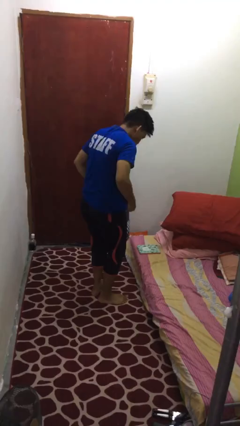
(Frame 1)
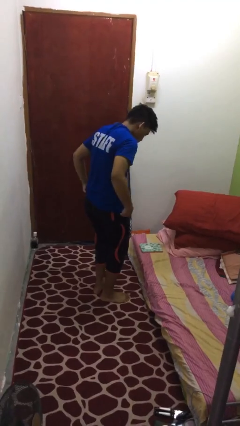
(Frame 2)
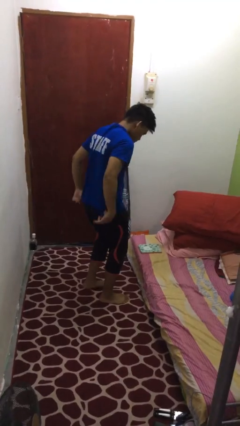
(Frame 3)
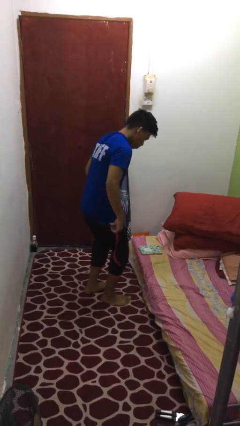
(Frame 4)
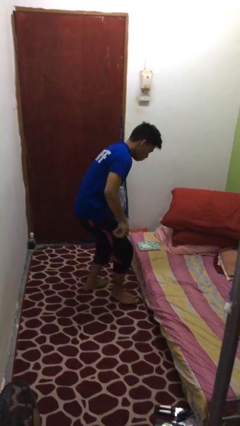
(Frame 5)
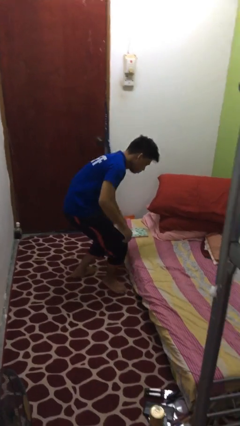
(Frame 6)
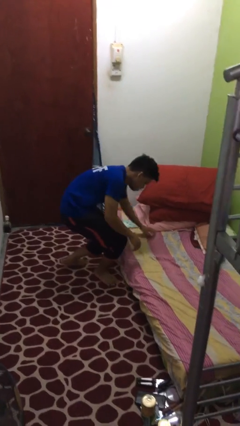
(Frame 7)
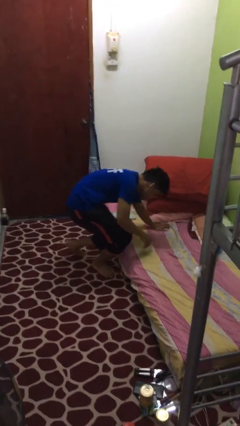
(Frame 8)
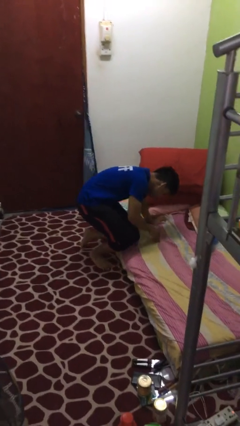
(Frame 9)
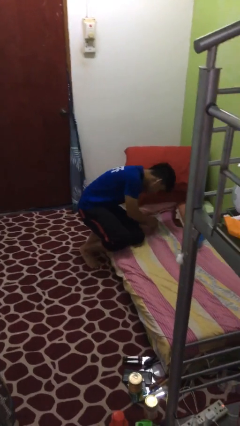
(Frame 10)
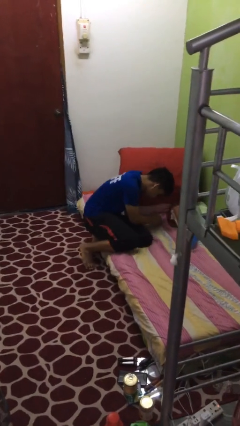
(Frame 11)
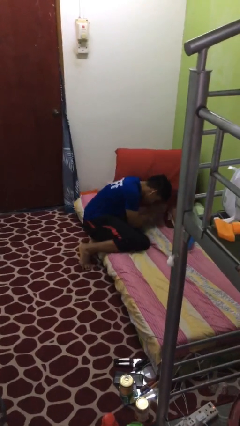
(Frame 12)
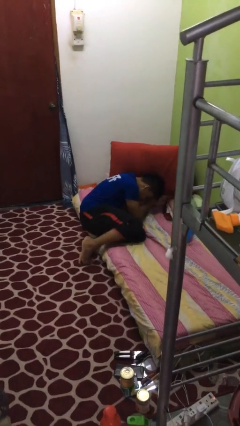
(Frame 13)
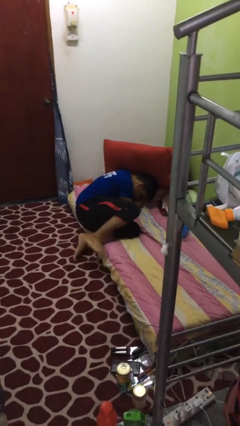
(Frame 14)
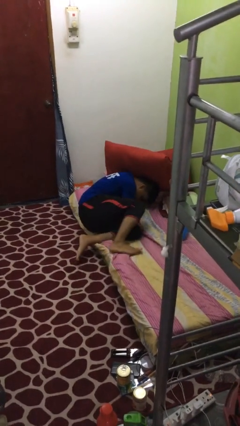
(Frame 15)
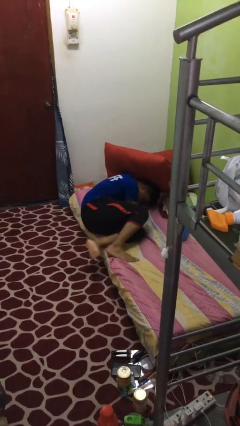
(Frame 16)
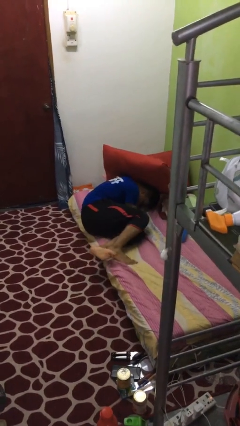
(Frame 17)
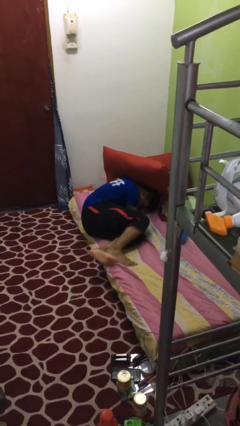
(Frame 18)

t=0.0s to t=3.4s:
person lies down on bed

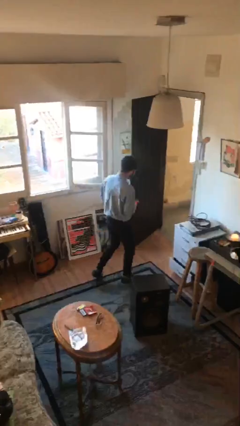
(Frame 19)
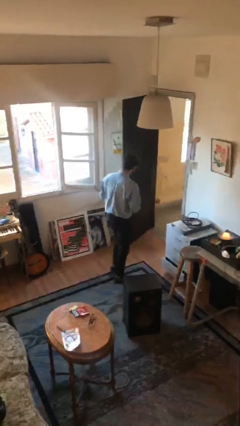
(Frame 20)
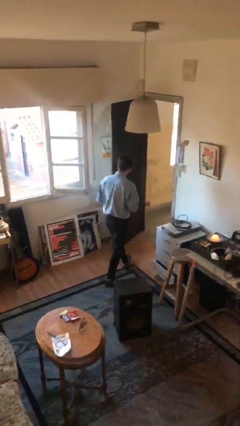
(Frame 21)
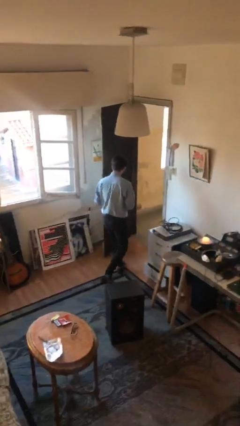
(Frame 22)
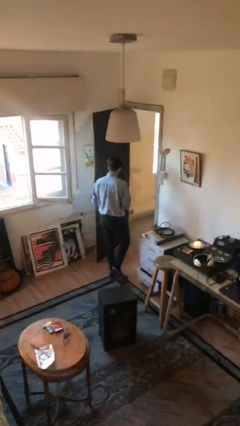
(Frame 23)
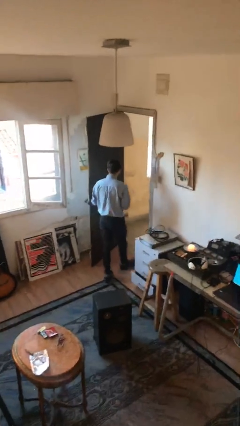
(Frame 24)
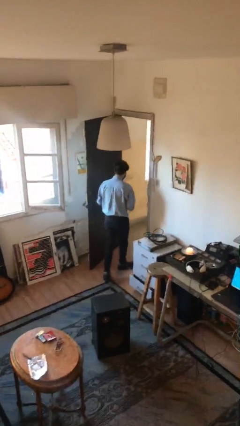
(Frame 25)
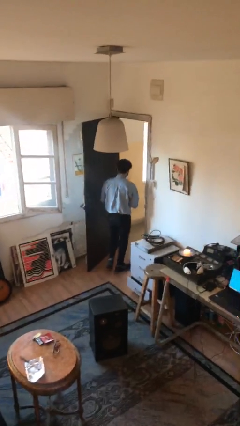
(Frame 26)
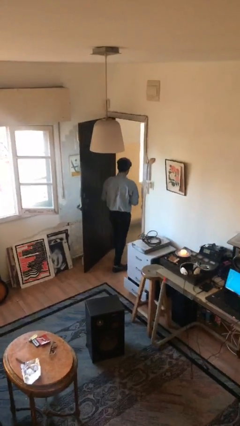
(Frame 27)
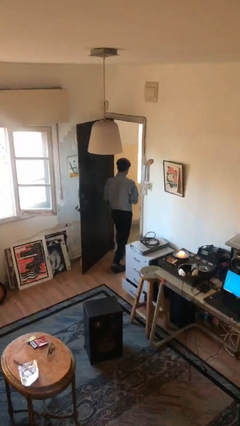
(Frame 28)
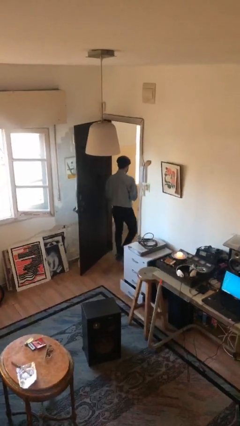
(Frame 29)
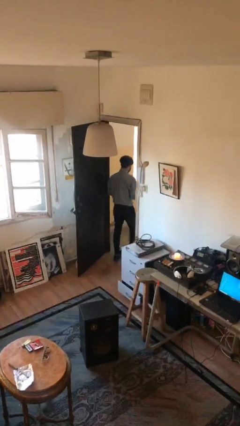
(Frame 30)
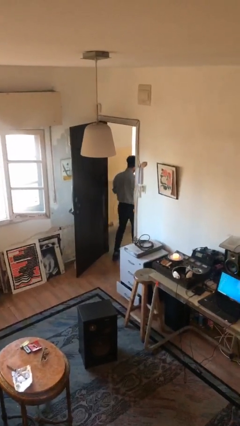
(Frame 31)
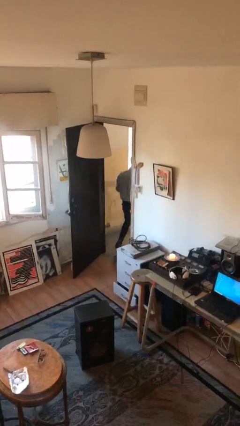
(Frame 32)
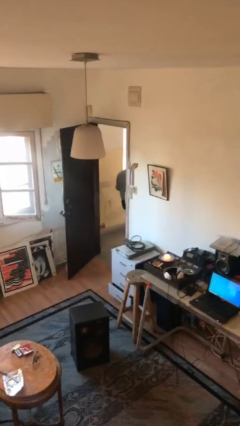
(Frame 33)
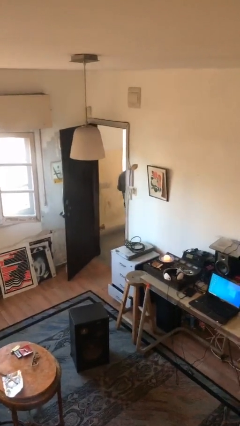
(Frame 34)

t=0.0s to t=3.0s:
person exits scene through structure

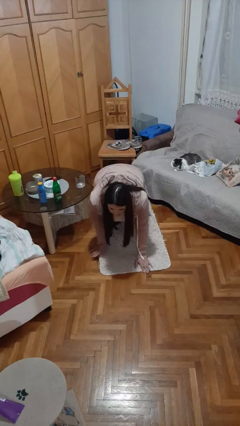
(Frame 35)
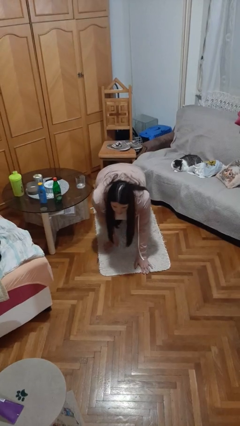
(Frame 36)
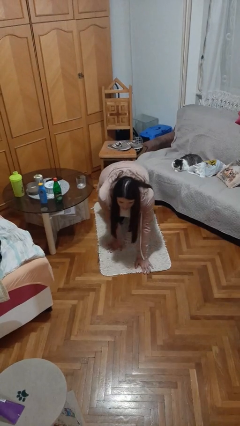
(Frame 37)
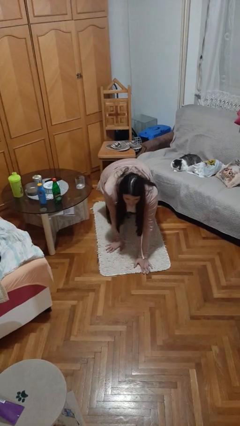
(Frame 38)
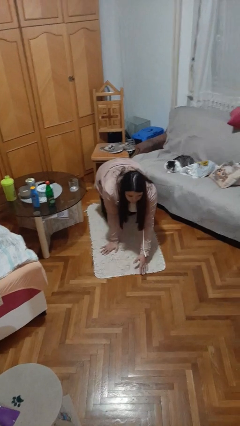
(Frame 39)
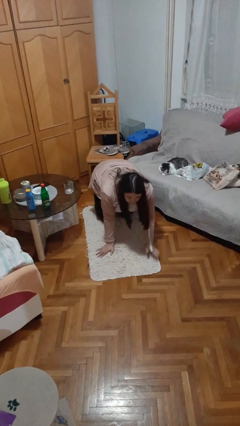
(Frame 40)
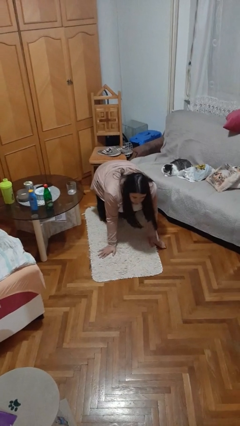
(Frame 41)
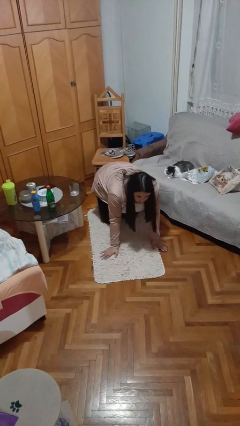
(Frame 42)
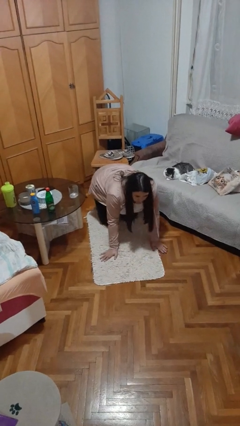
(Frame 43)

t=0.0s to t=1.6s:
person crawls

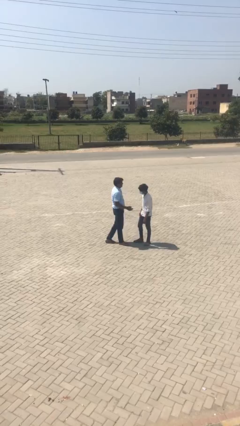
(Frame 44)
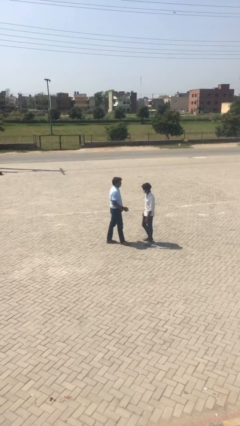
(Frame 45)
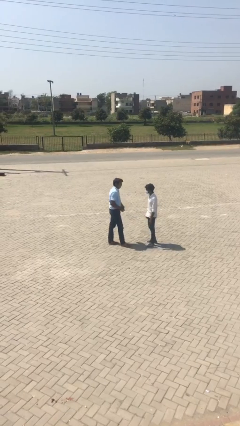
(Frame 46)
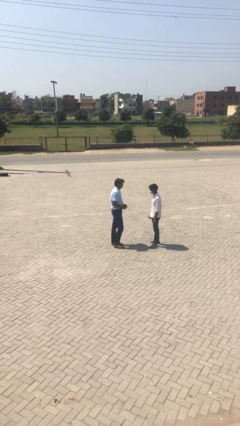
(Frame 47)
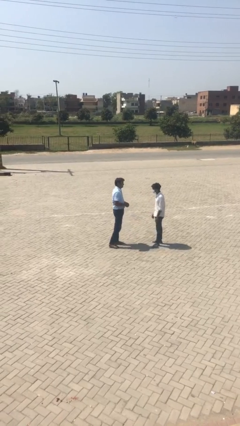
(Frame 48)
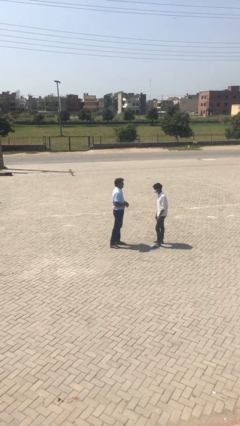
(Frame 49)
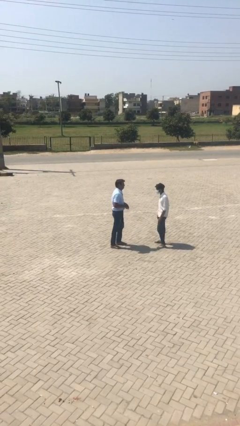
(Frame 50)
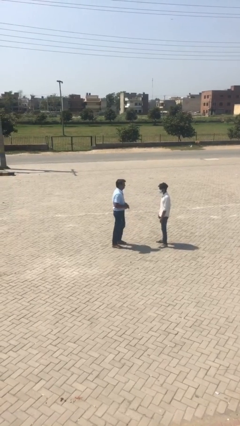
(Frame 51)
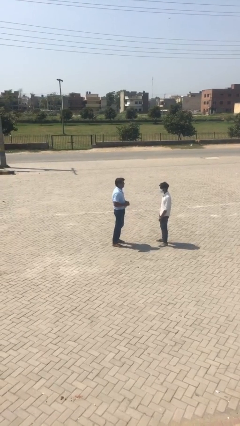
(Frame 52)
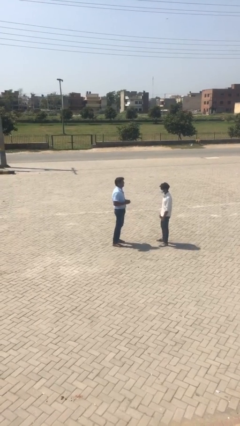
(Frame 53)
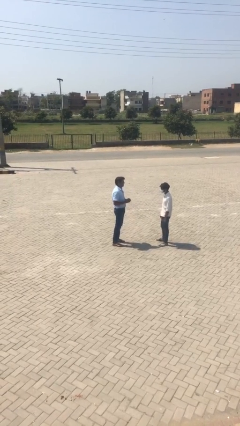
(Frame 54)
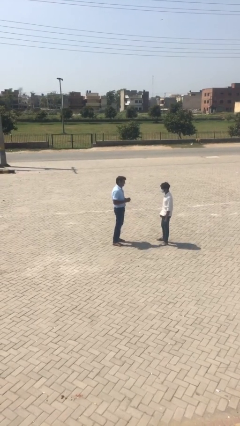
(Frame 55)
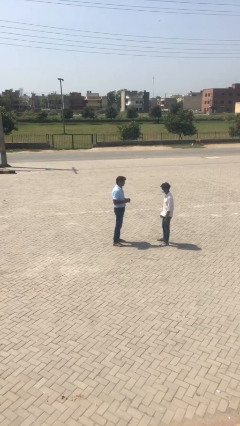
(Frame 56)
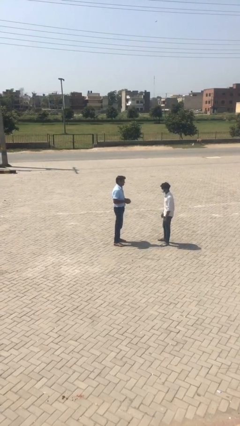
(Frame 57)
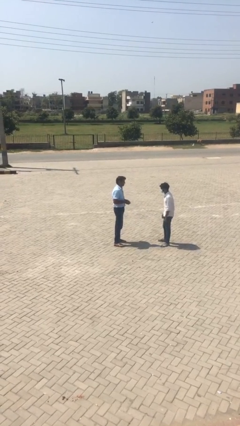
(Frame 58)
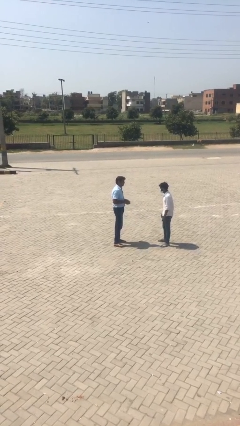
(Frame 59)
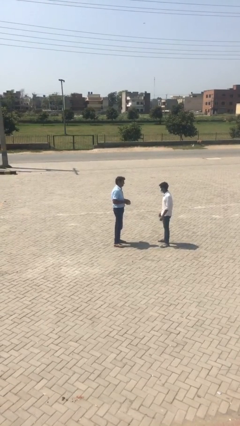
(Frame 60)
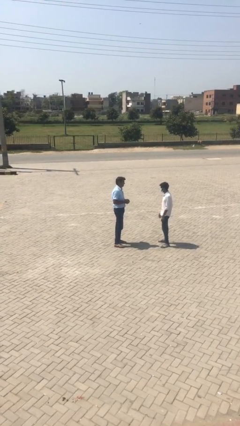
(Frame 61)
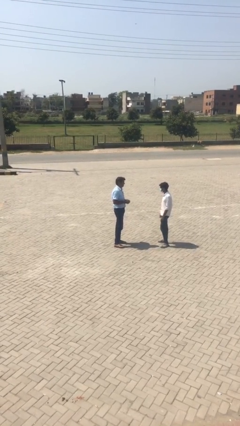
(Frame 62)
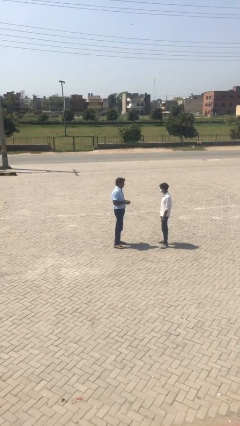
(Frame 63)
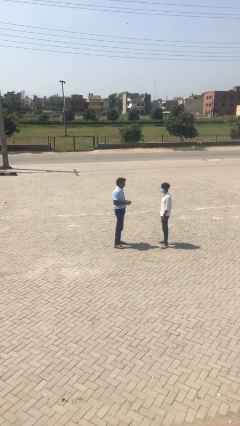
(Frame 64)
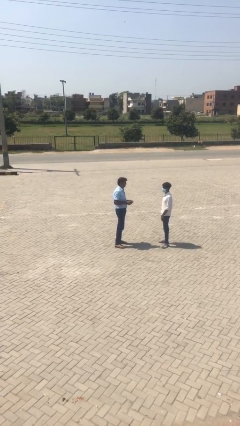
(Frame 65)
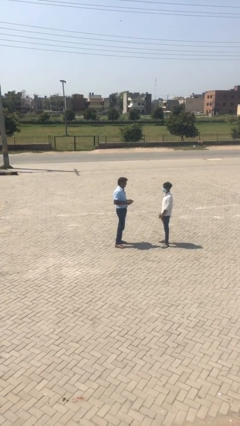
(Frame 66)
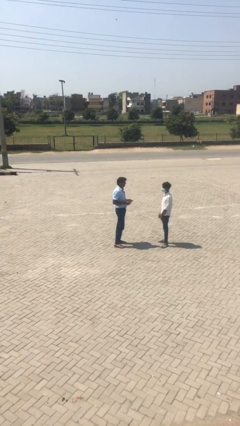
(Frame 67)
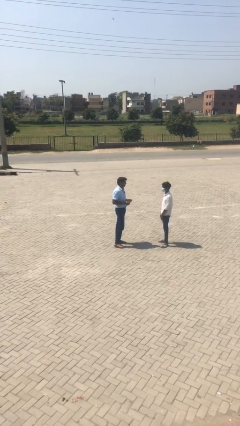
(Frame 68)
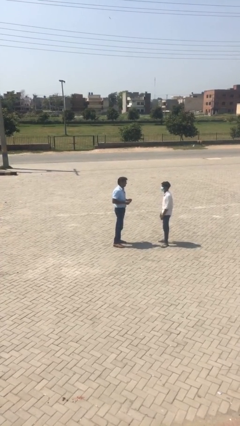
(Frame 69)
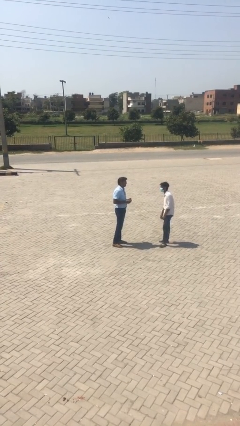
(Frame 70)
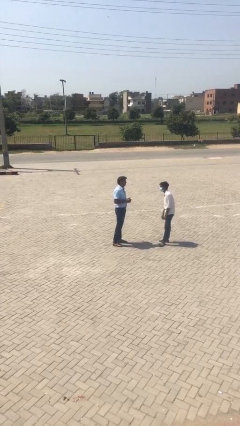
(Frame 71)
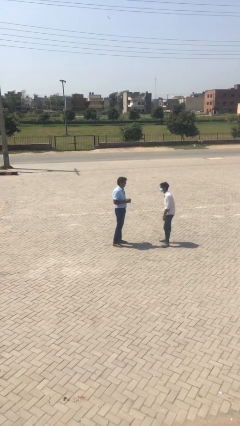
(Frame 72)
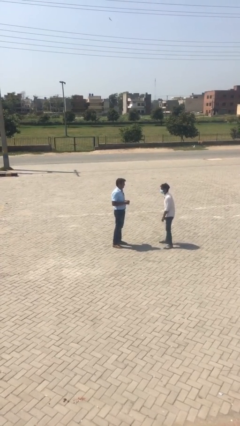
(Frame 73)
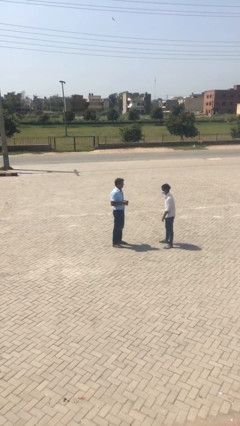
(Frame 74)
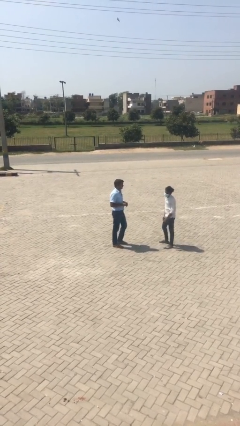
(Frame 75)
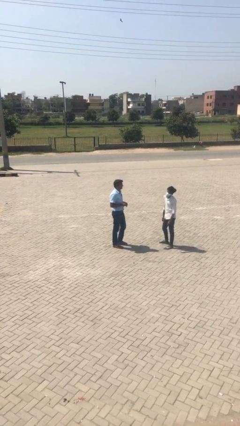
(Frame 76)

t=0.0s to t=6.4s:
person talks to person

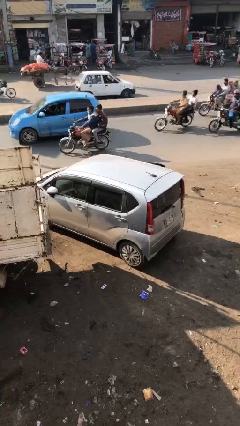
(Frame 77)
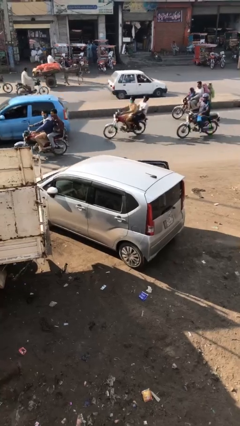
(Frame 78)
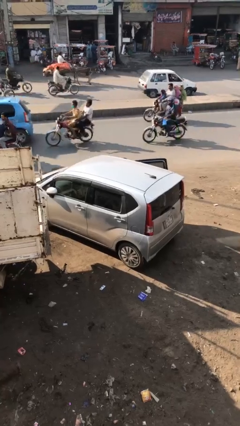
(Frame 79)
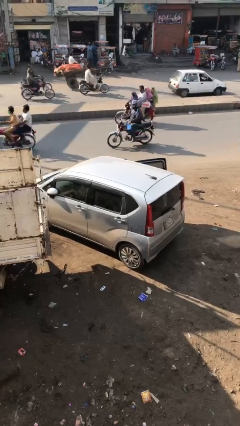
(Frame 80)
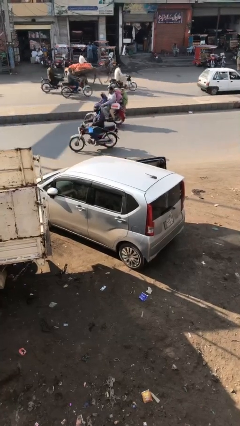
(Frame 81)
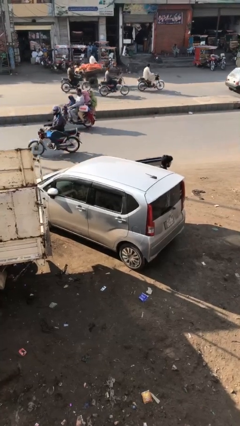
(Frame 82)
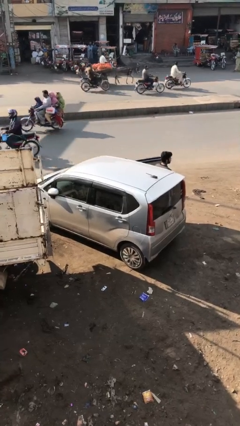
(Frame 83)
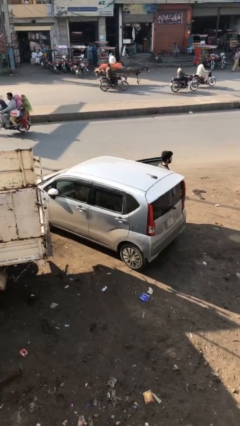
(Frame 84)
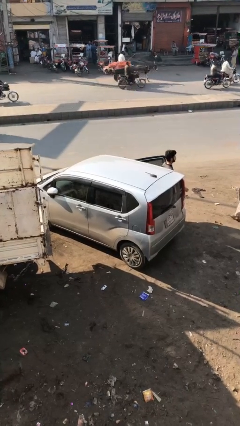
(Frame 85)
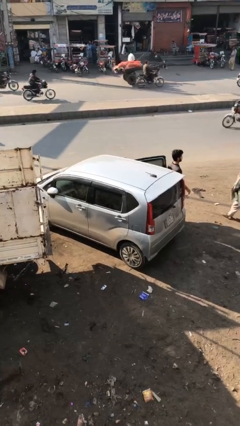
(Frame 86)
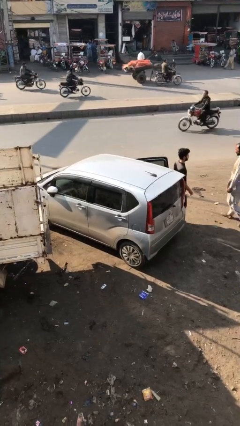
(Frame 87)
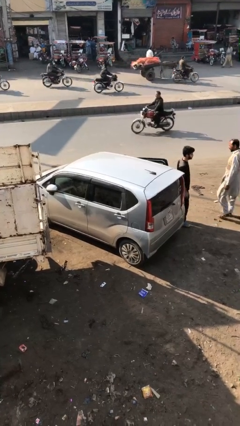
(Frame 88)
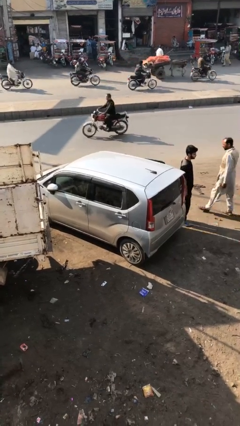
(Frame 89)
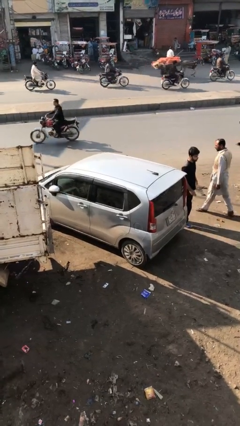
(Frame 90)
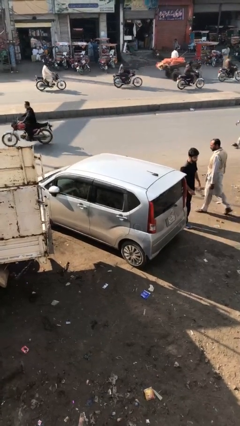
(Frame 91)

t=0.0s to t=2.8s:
car drops off person

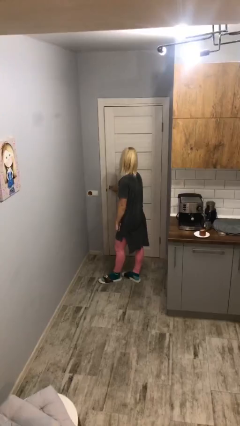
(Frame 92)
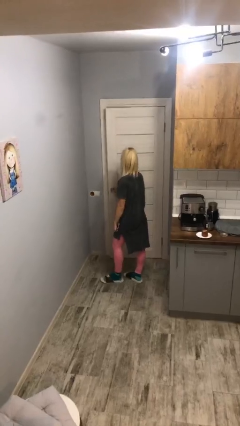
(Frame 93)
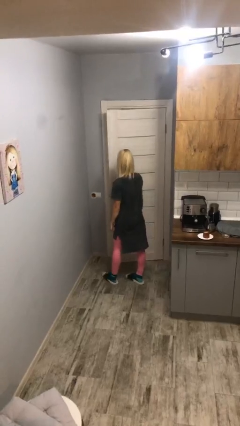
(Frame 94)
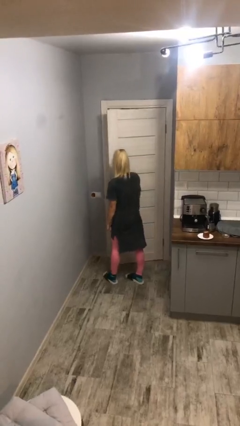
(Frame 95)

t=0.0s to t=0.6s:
person opens facility door
